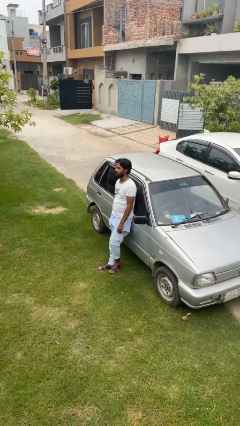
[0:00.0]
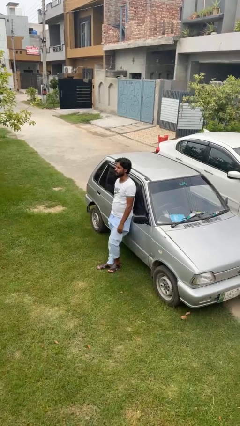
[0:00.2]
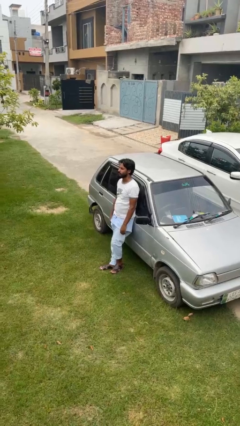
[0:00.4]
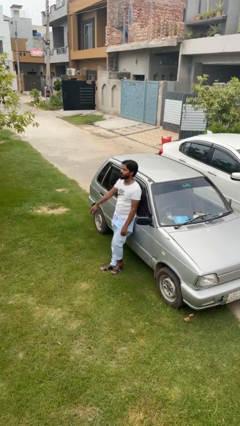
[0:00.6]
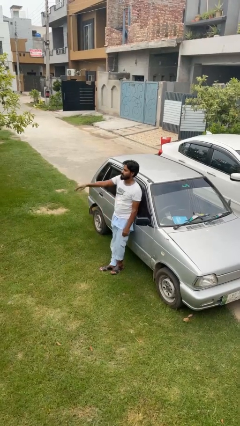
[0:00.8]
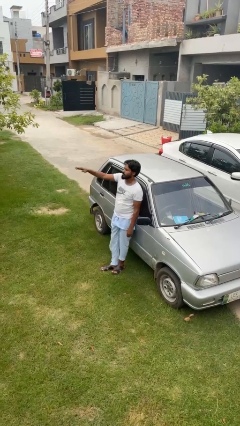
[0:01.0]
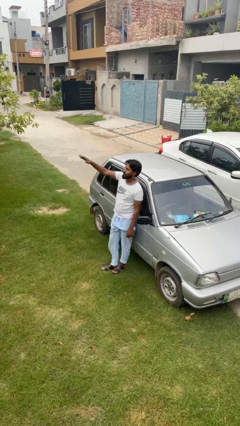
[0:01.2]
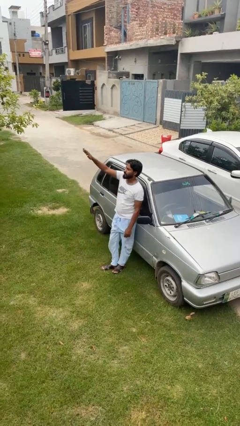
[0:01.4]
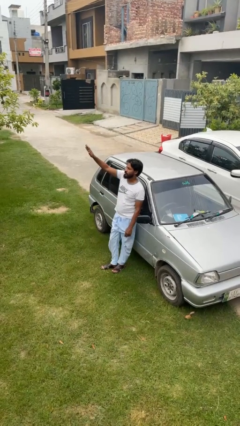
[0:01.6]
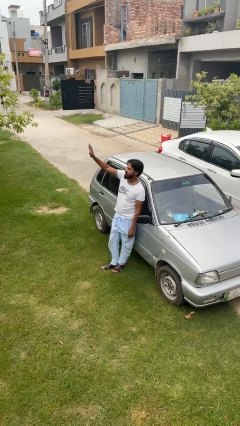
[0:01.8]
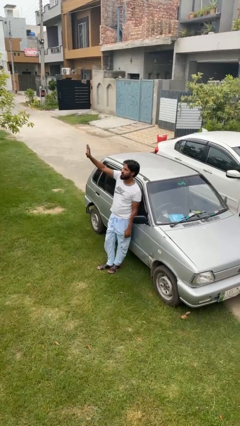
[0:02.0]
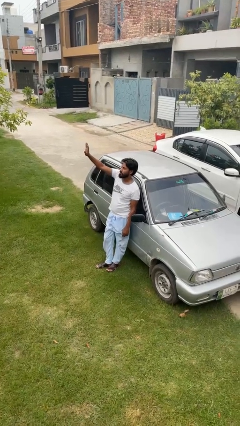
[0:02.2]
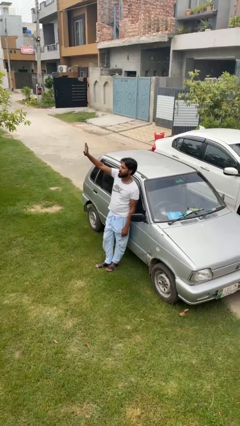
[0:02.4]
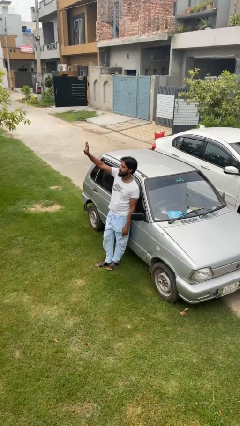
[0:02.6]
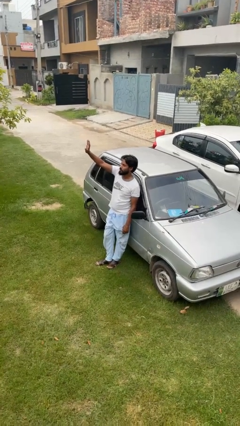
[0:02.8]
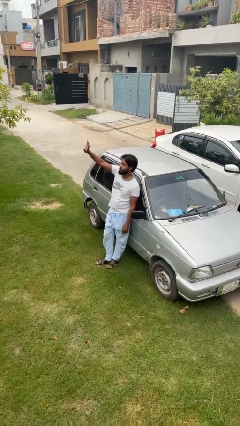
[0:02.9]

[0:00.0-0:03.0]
person gestures raise hand

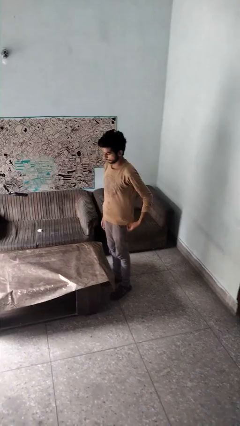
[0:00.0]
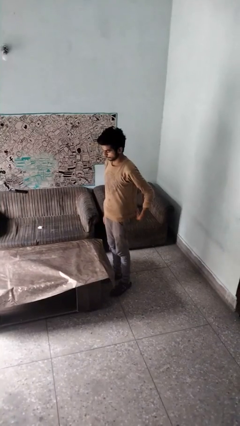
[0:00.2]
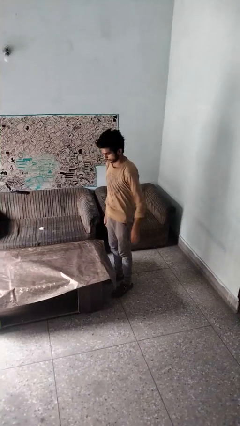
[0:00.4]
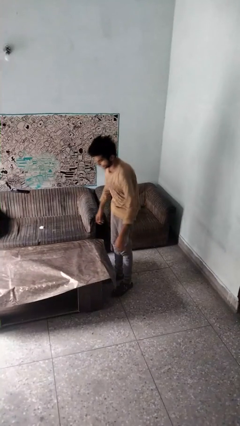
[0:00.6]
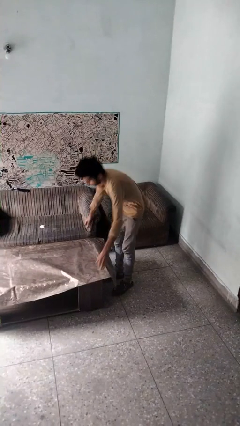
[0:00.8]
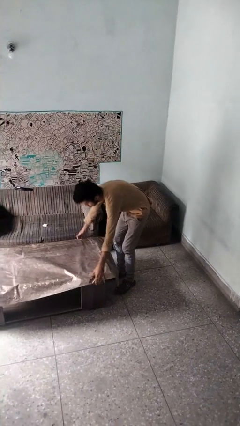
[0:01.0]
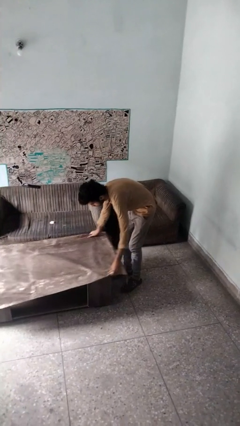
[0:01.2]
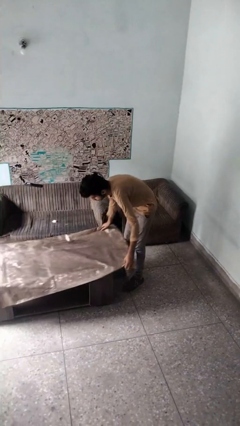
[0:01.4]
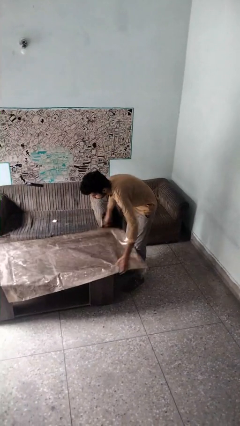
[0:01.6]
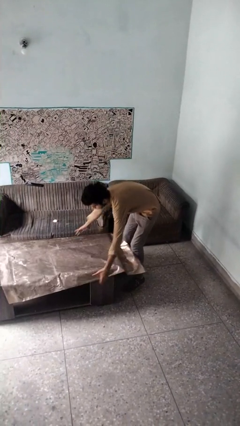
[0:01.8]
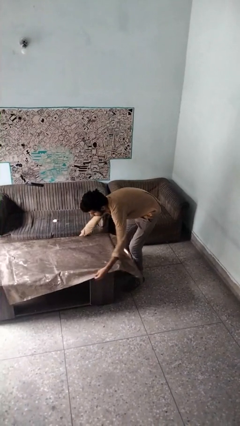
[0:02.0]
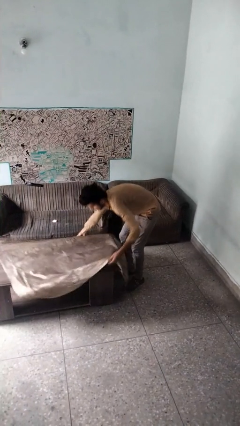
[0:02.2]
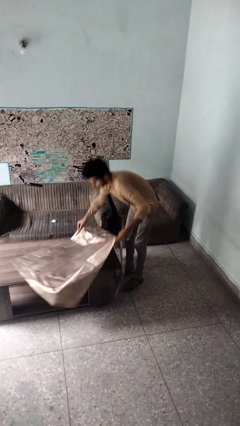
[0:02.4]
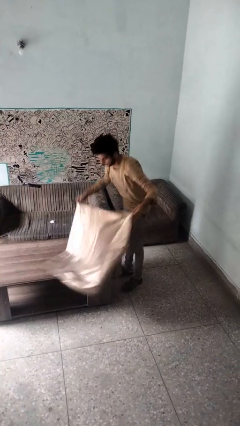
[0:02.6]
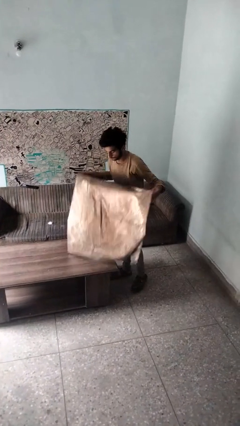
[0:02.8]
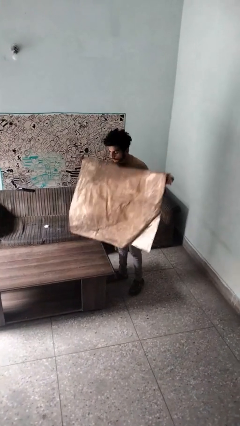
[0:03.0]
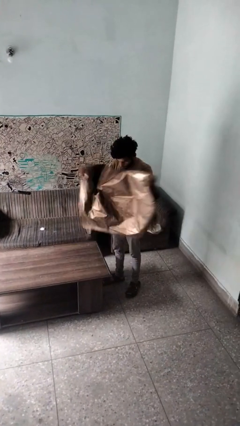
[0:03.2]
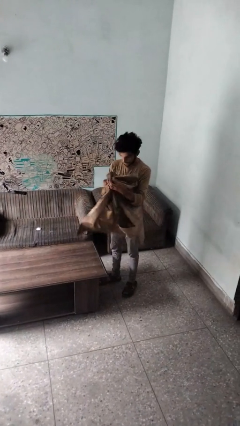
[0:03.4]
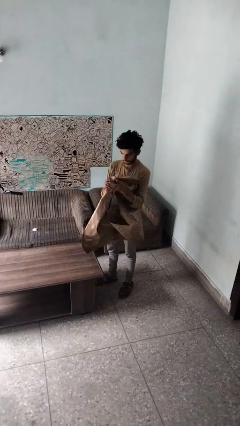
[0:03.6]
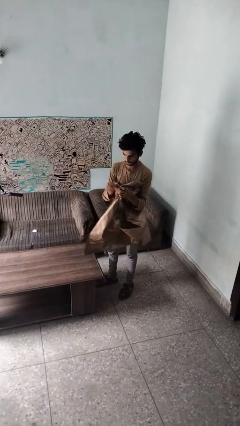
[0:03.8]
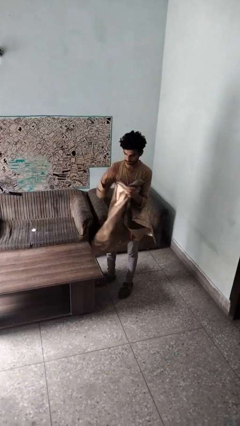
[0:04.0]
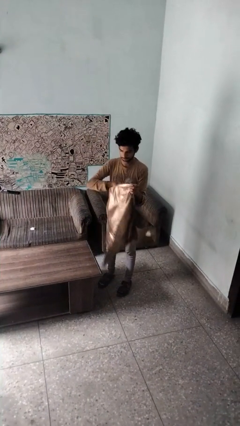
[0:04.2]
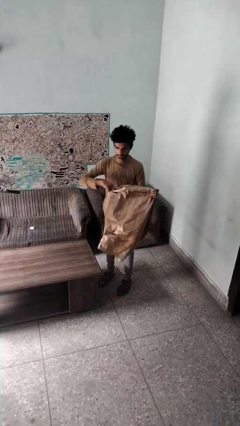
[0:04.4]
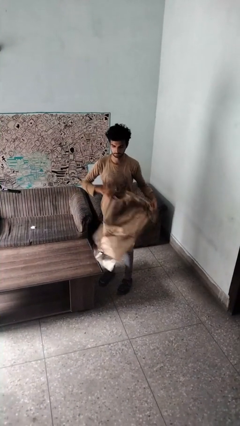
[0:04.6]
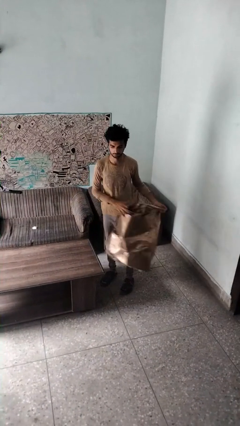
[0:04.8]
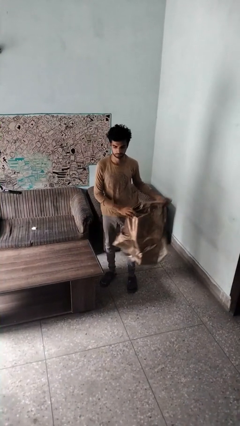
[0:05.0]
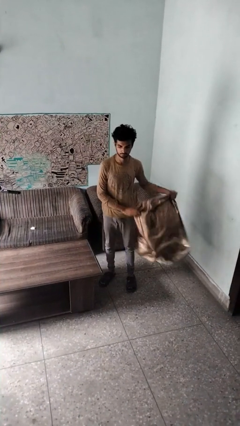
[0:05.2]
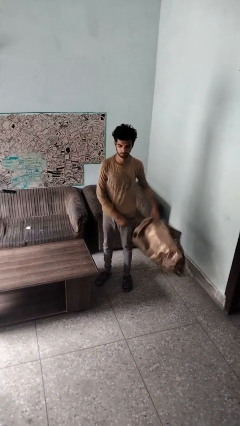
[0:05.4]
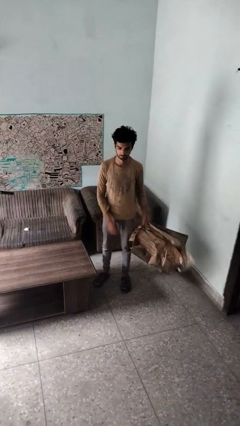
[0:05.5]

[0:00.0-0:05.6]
person folds tablecloth

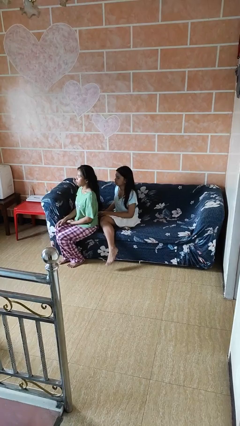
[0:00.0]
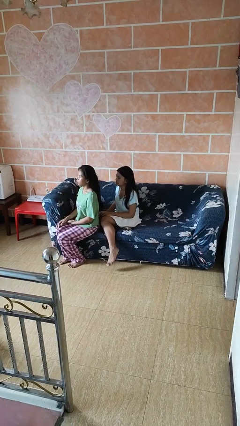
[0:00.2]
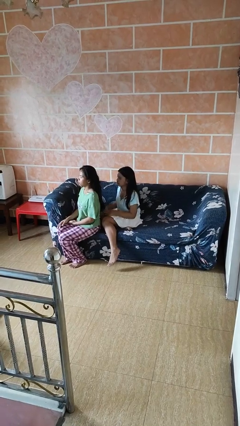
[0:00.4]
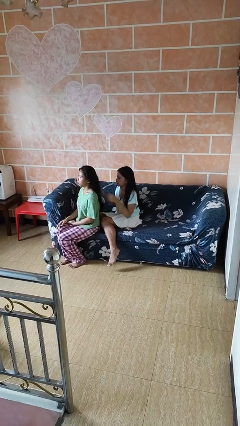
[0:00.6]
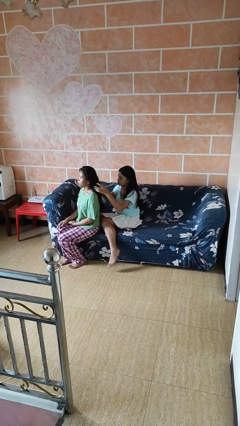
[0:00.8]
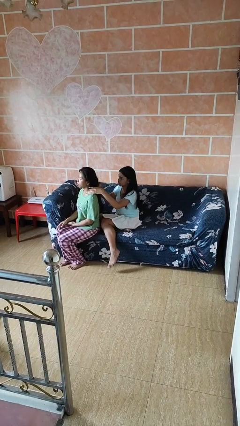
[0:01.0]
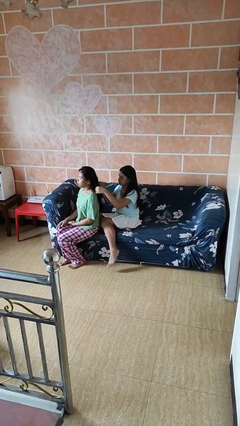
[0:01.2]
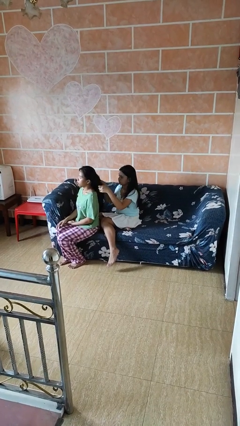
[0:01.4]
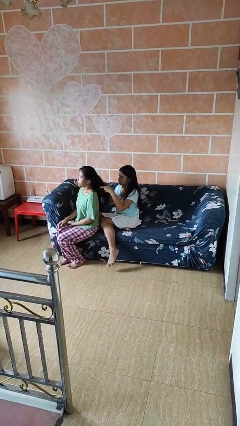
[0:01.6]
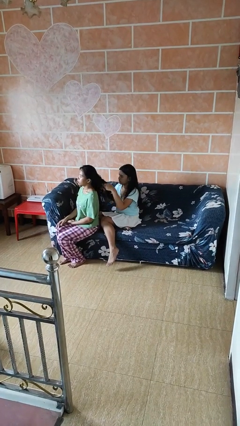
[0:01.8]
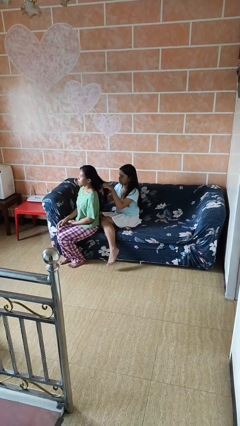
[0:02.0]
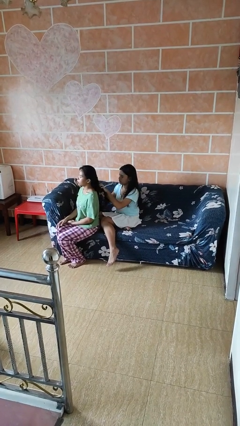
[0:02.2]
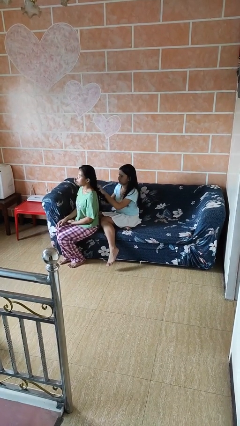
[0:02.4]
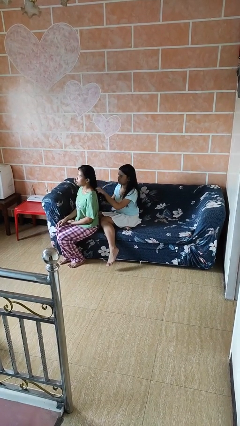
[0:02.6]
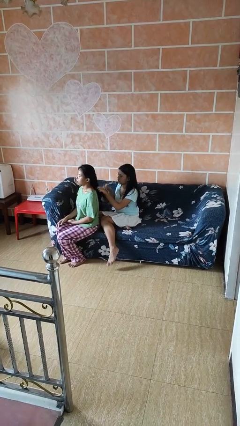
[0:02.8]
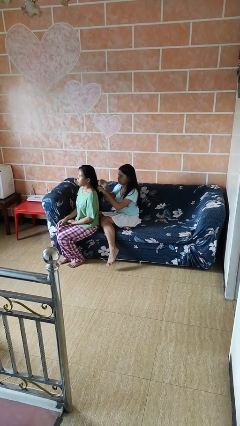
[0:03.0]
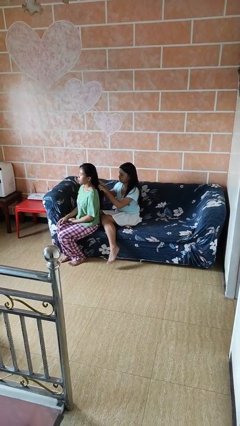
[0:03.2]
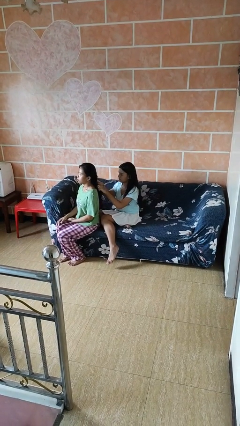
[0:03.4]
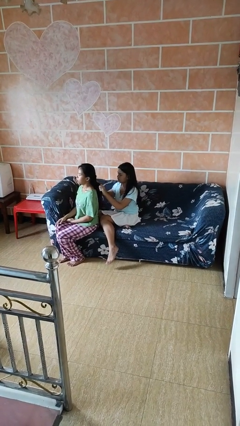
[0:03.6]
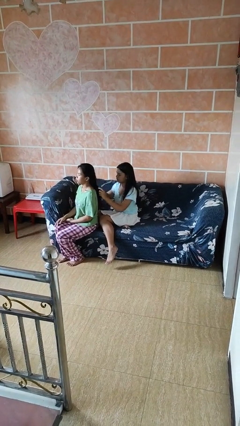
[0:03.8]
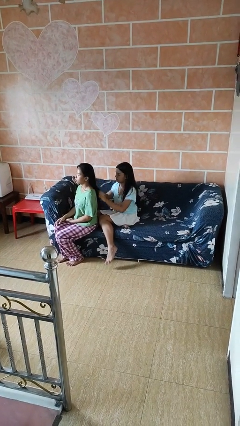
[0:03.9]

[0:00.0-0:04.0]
person braids hair of person

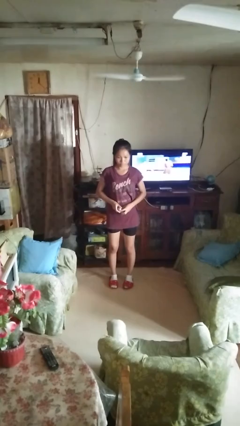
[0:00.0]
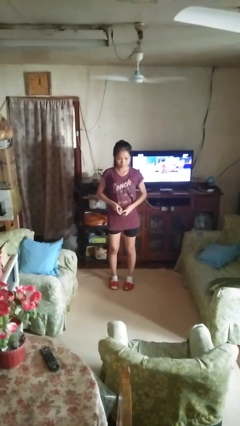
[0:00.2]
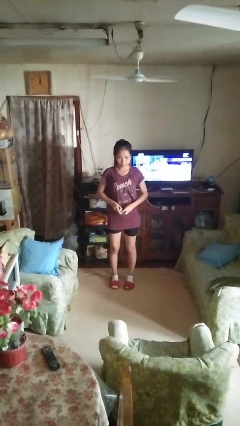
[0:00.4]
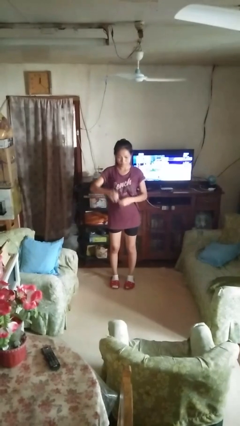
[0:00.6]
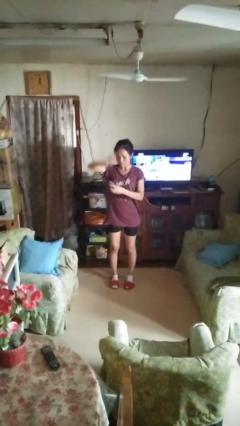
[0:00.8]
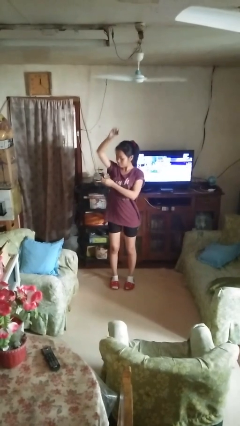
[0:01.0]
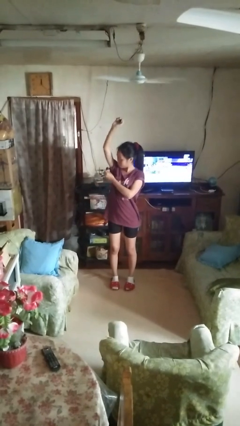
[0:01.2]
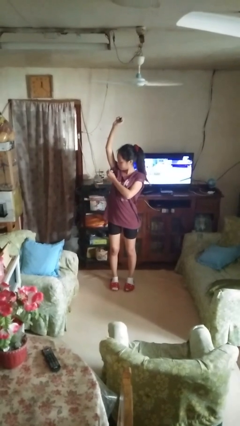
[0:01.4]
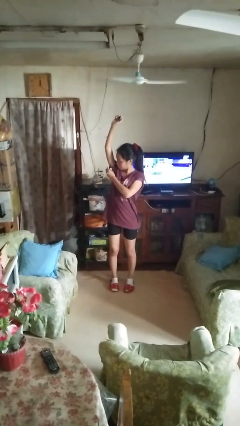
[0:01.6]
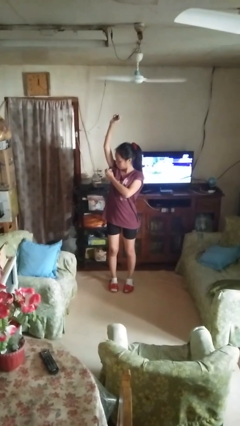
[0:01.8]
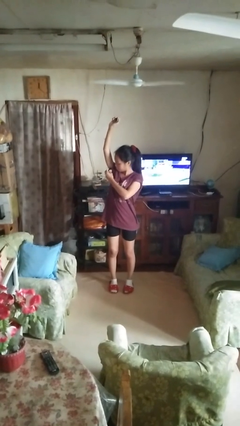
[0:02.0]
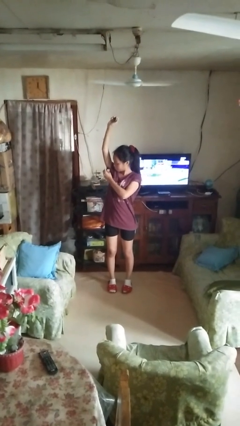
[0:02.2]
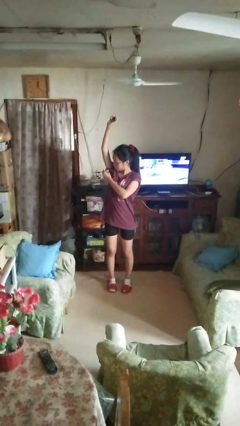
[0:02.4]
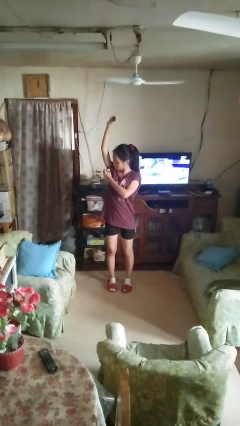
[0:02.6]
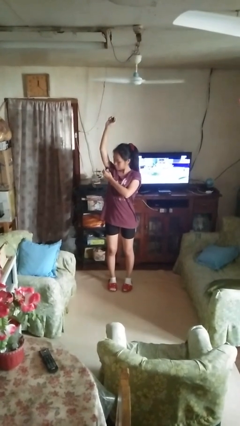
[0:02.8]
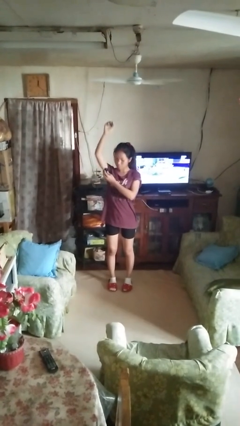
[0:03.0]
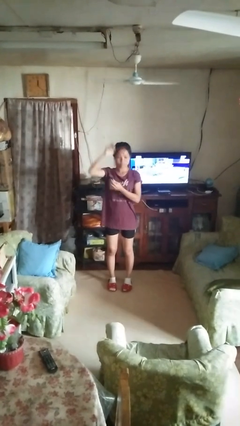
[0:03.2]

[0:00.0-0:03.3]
person applies deodorant

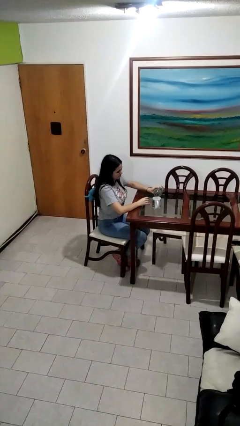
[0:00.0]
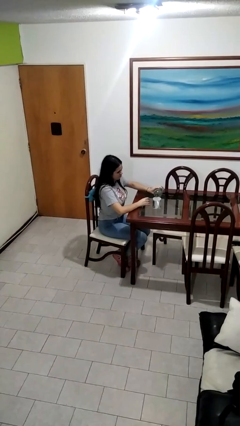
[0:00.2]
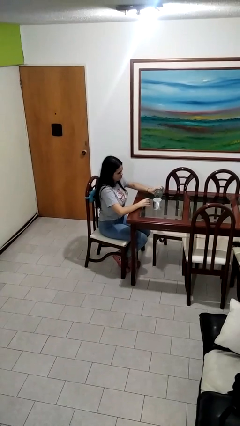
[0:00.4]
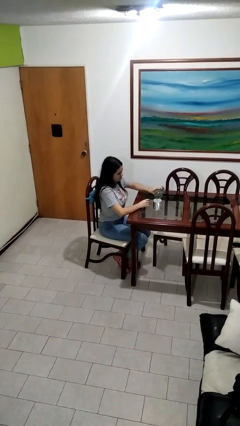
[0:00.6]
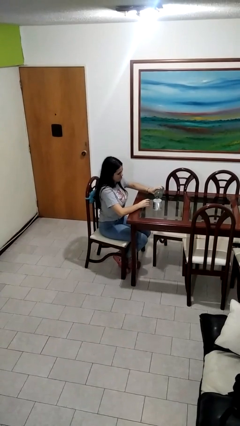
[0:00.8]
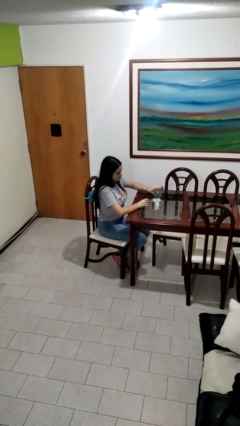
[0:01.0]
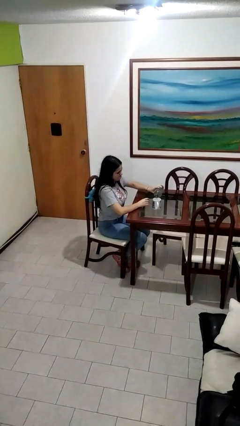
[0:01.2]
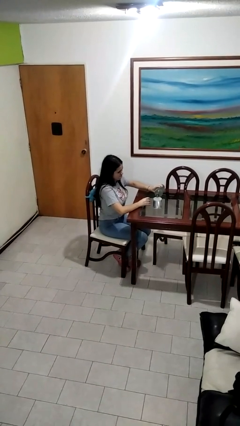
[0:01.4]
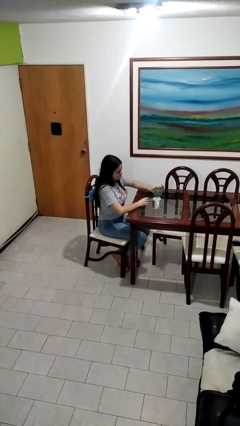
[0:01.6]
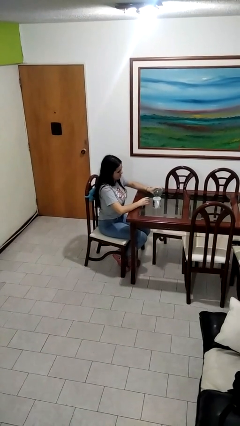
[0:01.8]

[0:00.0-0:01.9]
person pours liquid into cup
